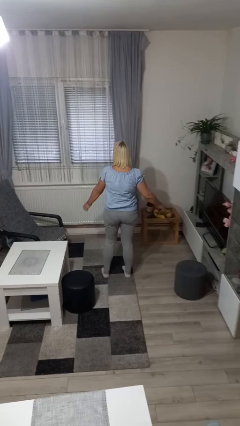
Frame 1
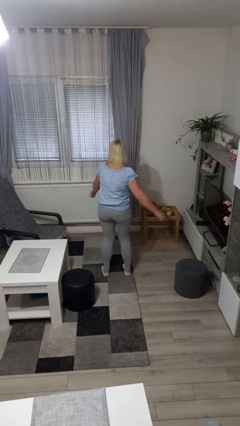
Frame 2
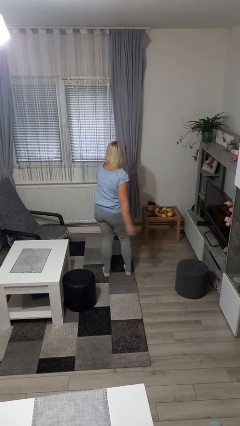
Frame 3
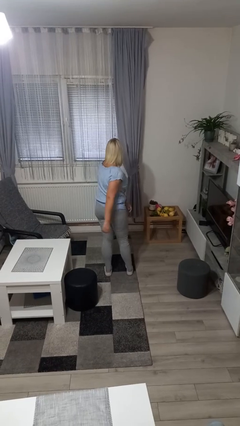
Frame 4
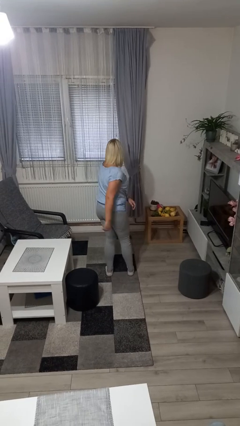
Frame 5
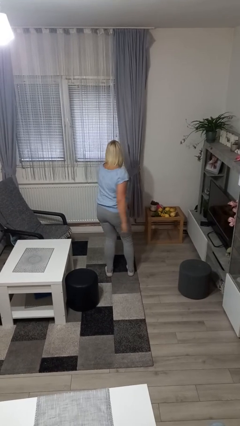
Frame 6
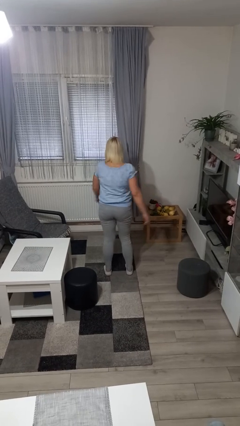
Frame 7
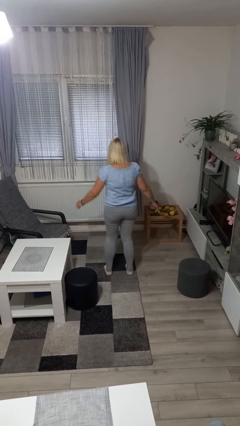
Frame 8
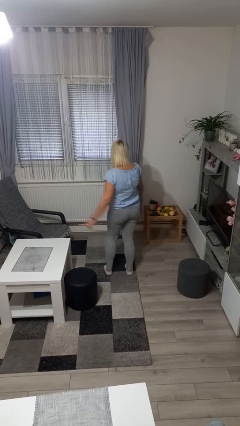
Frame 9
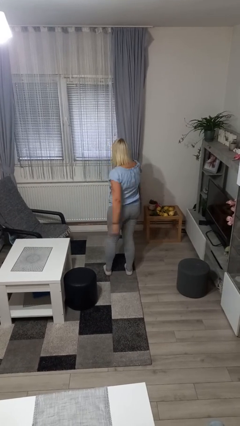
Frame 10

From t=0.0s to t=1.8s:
person dances in place

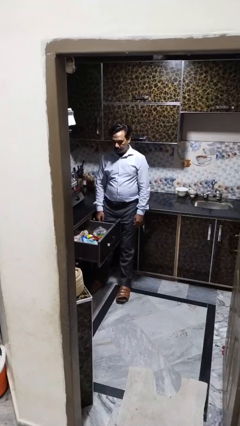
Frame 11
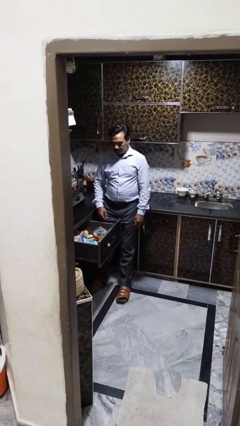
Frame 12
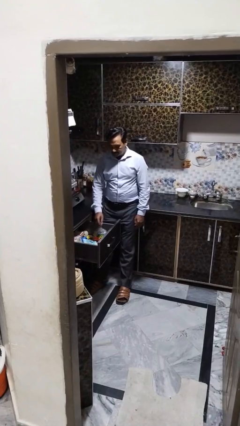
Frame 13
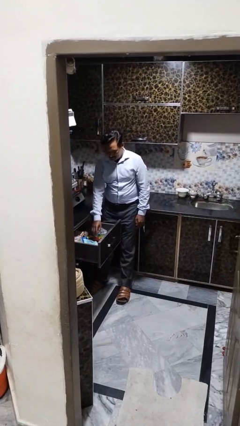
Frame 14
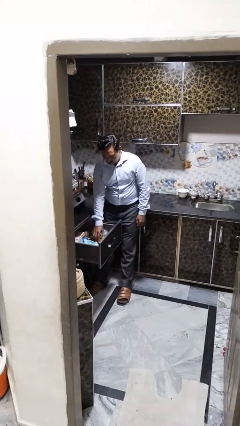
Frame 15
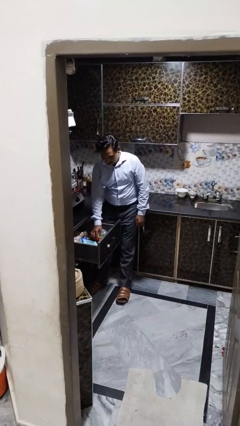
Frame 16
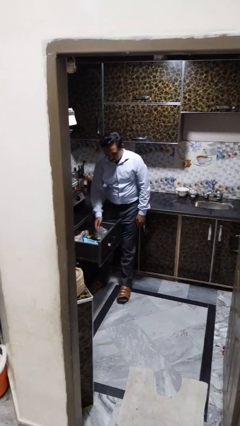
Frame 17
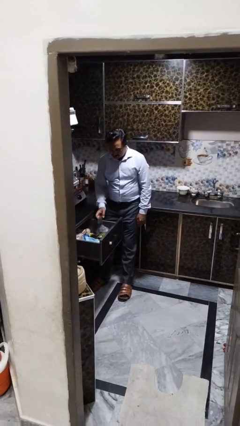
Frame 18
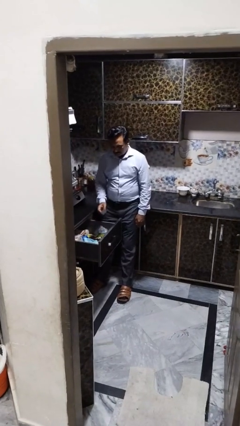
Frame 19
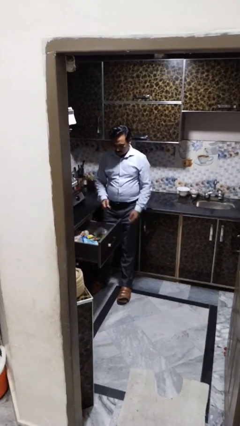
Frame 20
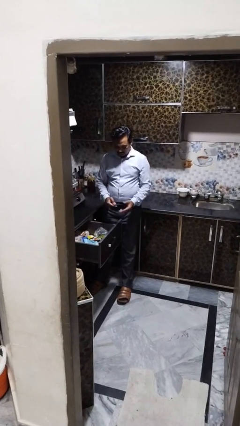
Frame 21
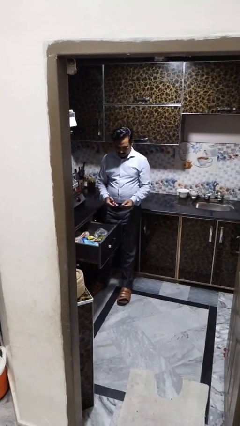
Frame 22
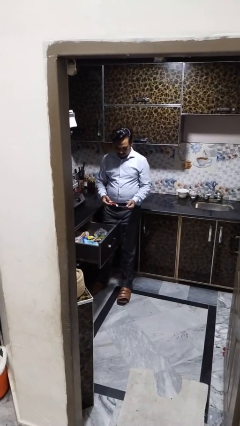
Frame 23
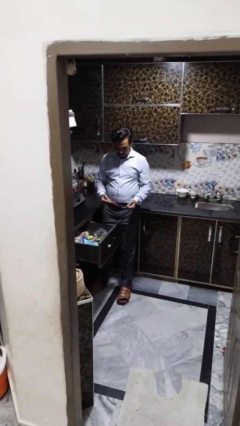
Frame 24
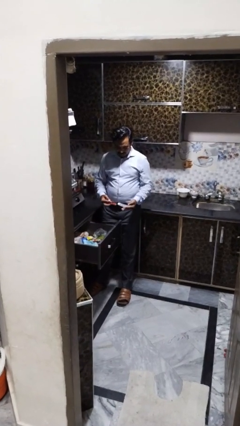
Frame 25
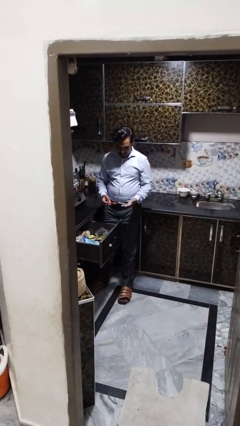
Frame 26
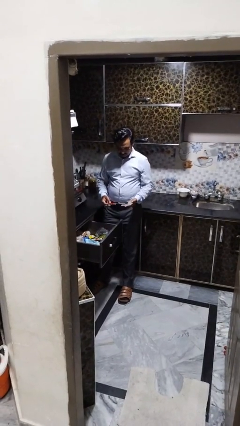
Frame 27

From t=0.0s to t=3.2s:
person takes object from kitchen drawer

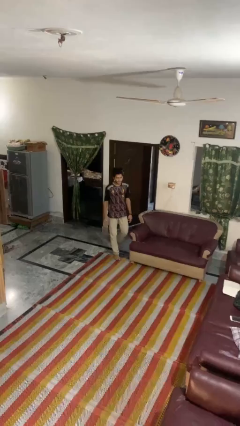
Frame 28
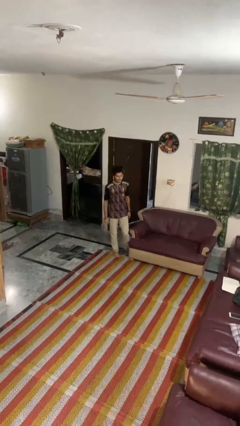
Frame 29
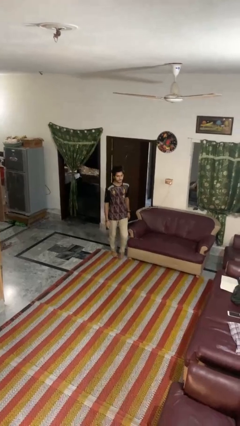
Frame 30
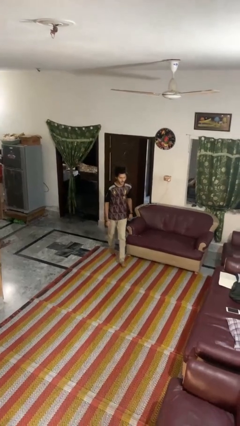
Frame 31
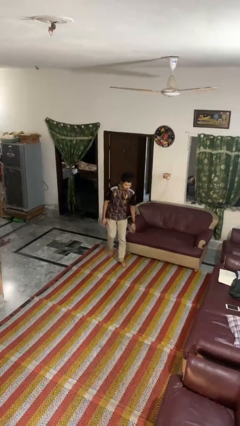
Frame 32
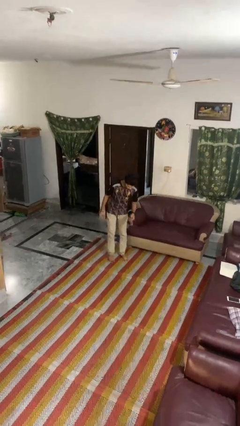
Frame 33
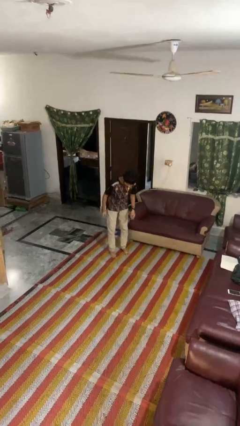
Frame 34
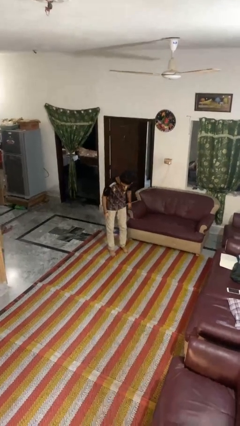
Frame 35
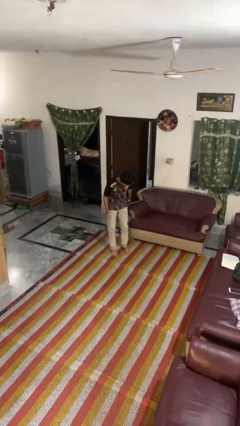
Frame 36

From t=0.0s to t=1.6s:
person stubs toe

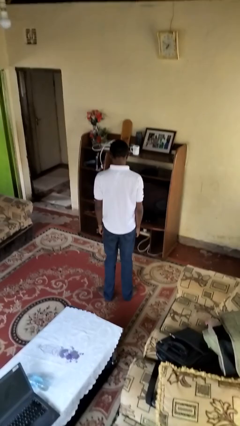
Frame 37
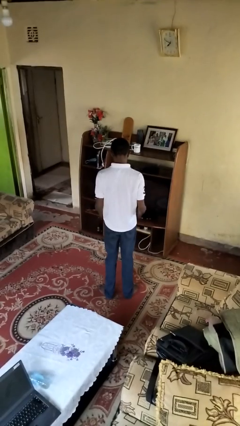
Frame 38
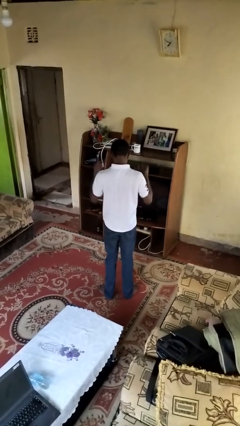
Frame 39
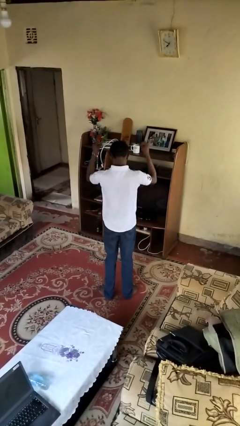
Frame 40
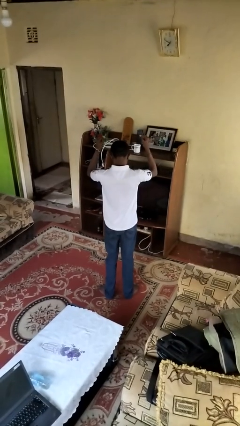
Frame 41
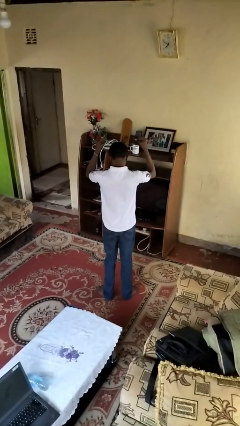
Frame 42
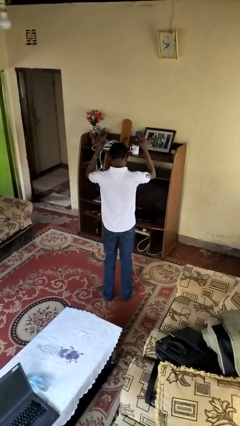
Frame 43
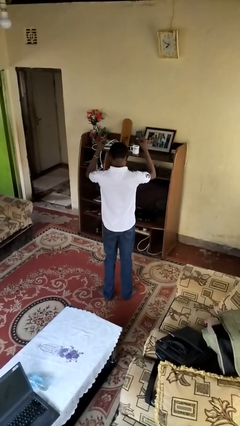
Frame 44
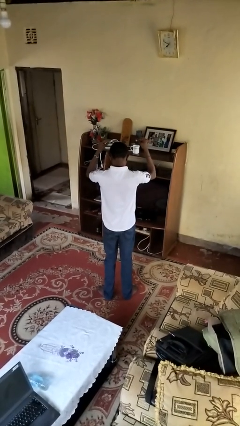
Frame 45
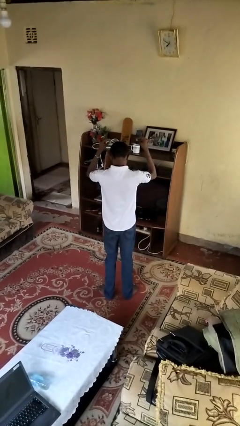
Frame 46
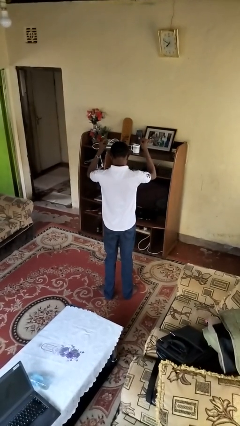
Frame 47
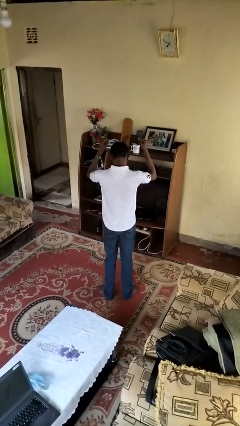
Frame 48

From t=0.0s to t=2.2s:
person snaps fingers

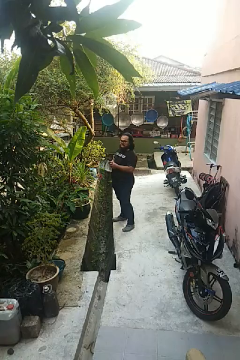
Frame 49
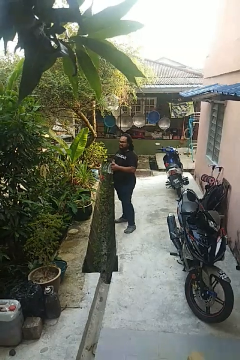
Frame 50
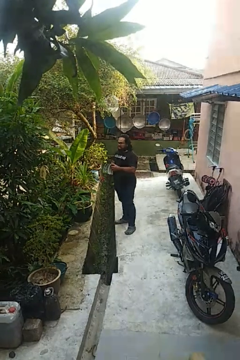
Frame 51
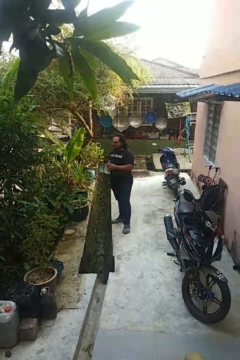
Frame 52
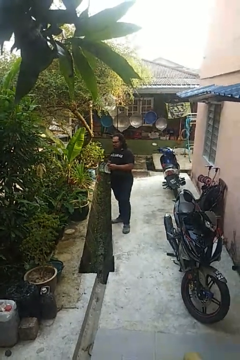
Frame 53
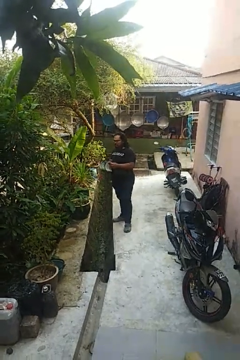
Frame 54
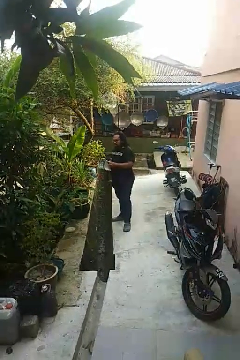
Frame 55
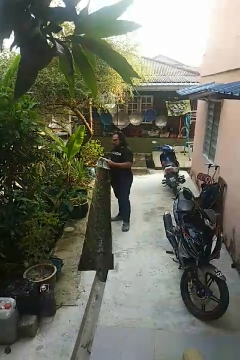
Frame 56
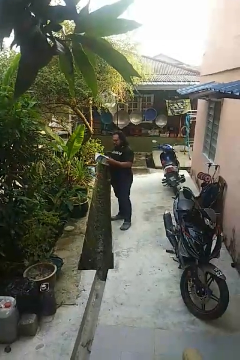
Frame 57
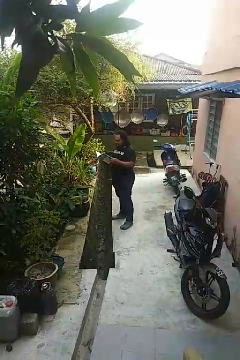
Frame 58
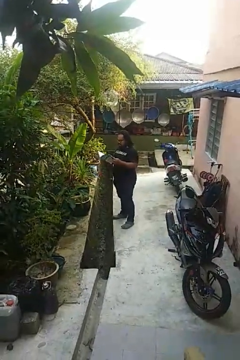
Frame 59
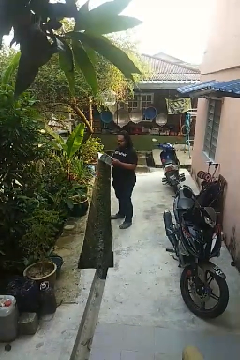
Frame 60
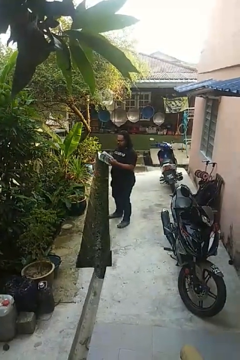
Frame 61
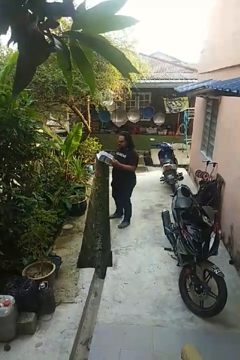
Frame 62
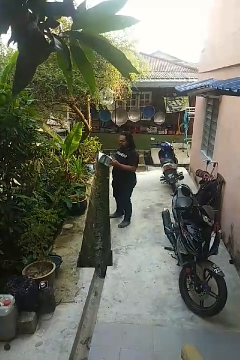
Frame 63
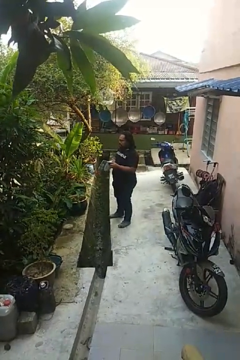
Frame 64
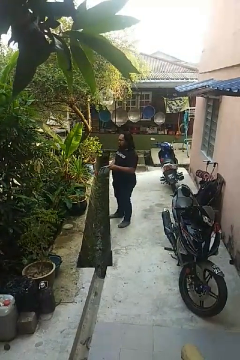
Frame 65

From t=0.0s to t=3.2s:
person reads magazine

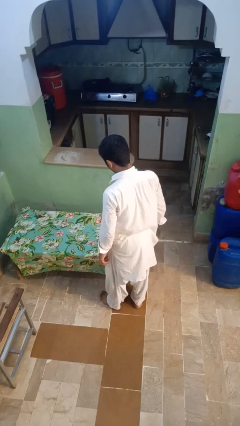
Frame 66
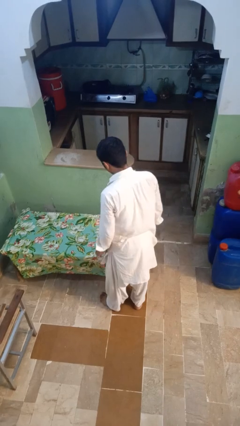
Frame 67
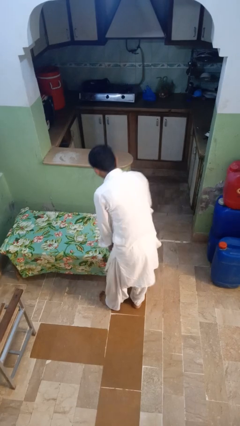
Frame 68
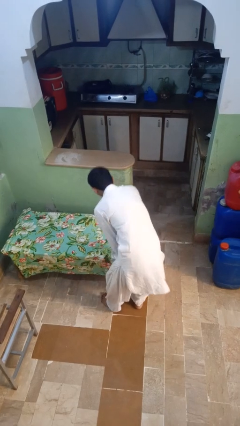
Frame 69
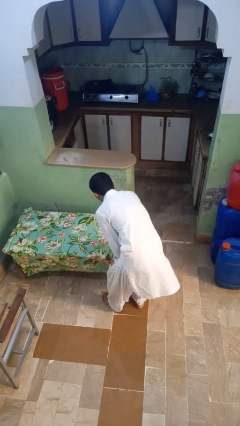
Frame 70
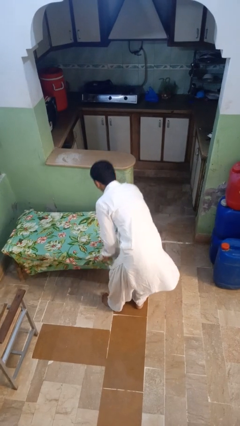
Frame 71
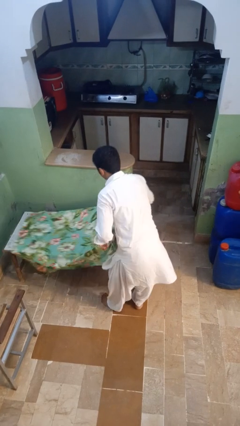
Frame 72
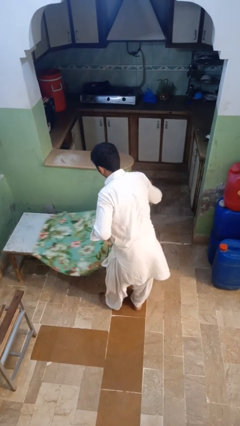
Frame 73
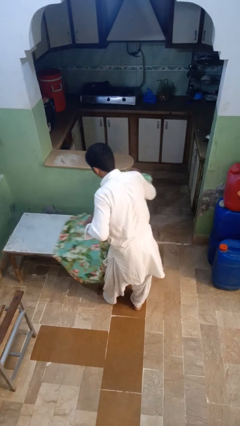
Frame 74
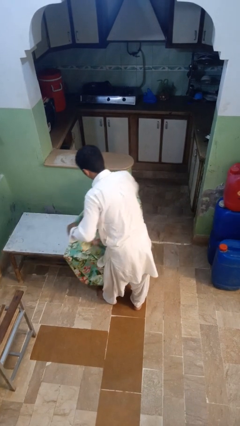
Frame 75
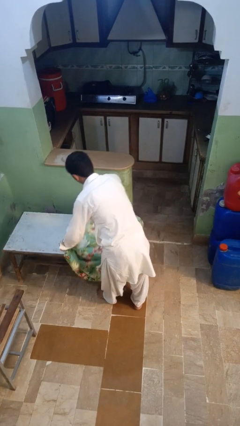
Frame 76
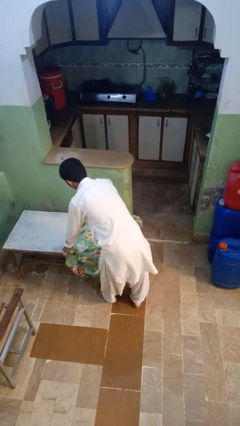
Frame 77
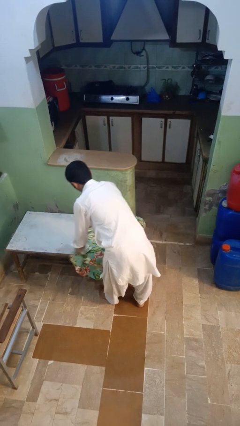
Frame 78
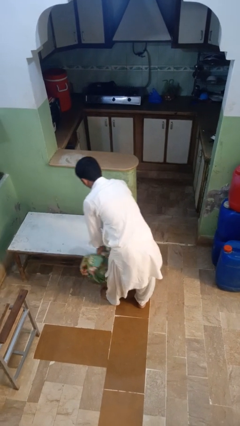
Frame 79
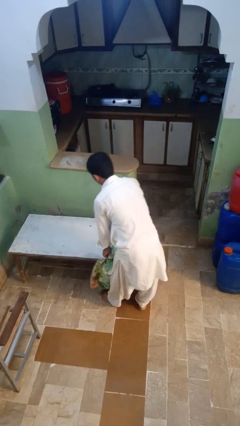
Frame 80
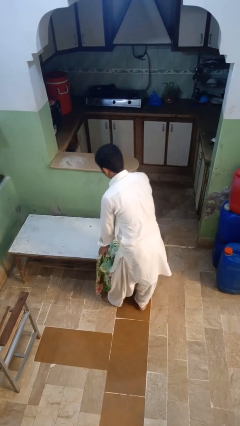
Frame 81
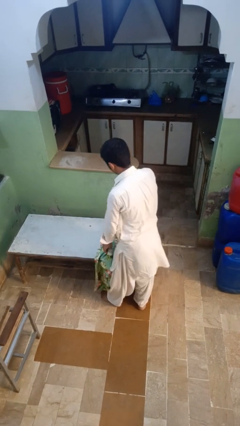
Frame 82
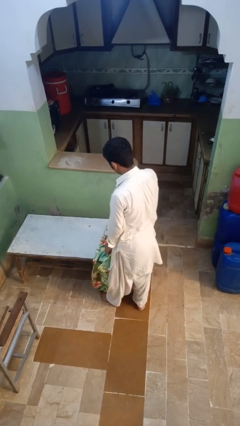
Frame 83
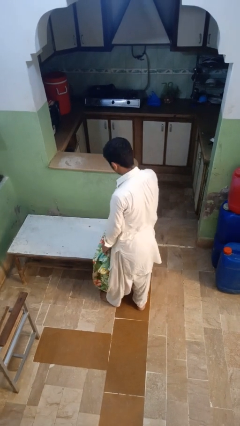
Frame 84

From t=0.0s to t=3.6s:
person folds tablecloth

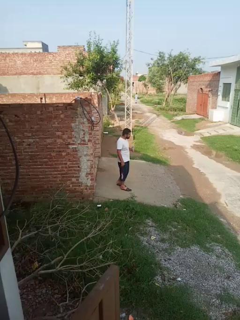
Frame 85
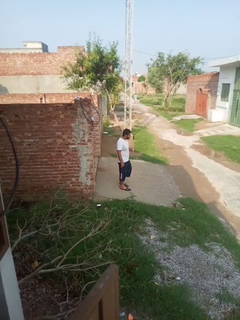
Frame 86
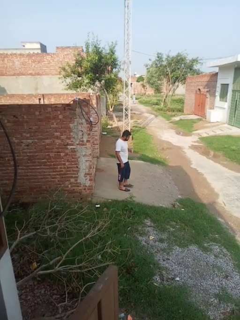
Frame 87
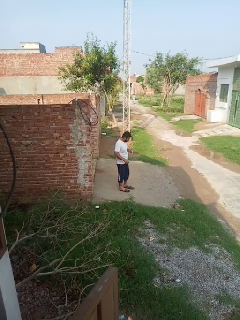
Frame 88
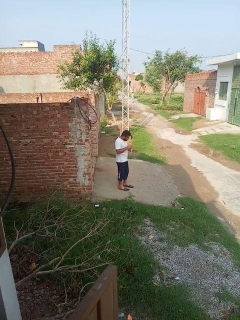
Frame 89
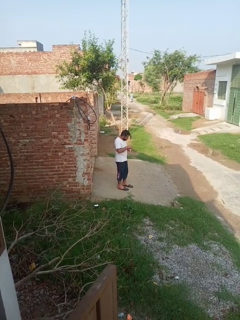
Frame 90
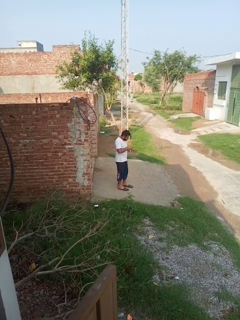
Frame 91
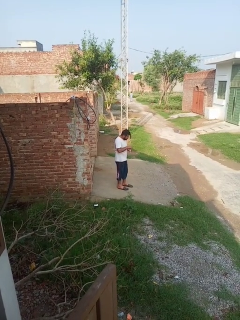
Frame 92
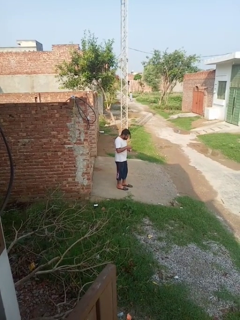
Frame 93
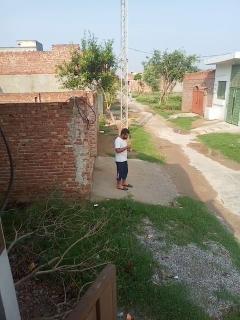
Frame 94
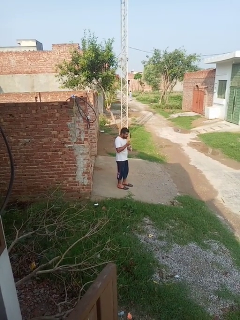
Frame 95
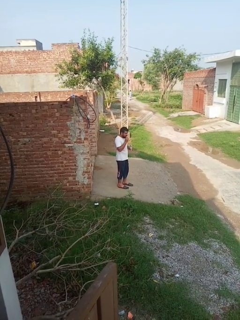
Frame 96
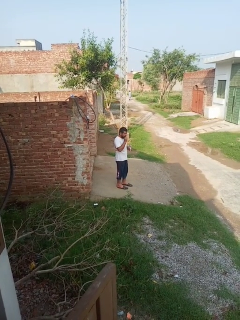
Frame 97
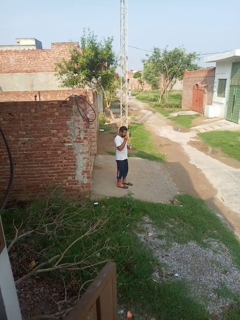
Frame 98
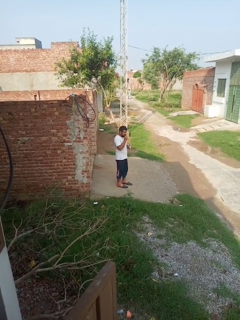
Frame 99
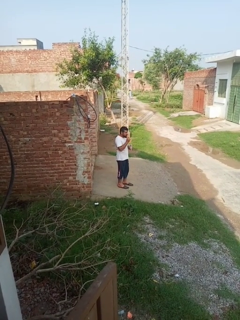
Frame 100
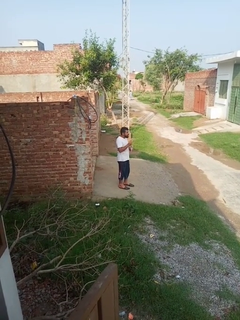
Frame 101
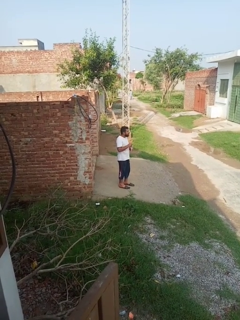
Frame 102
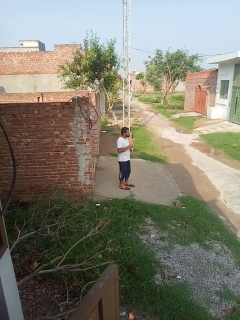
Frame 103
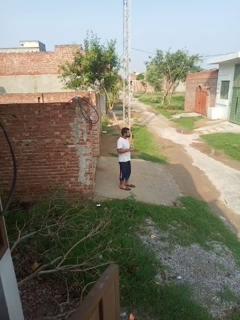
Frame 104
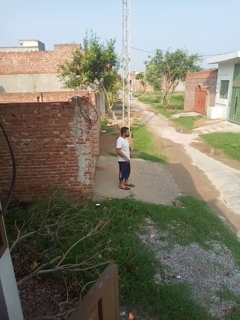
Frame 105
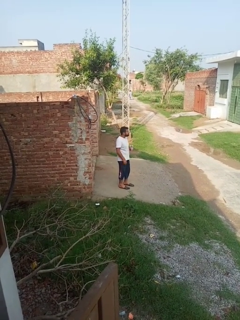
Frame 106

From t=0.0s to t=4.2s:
person eats snack from bag
